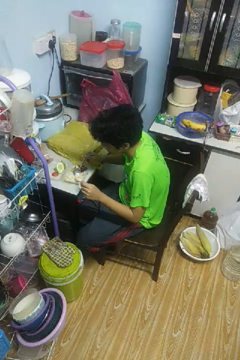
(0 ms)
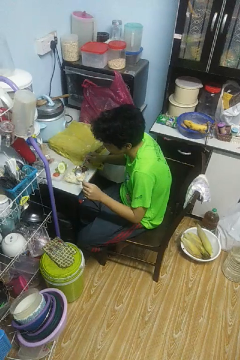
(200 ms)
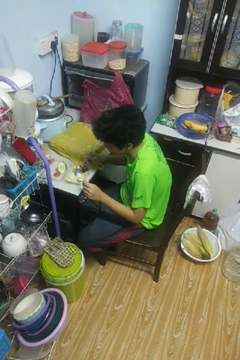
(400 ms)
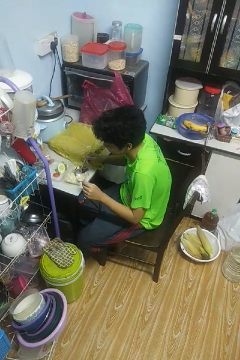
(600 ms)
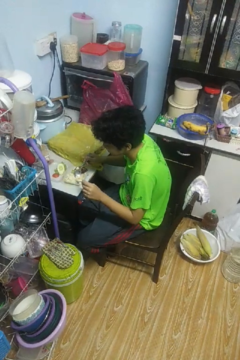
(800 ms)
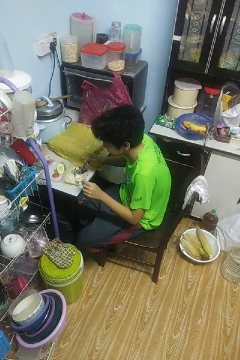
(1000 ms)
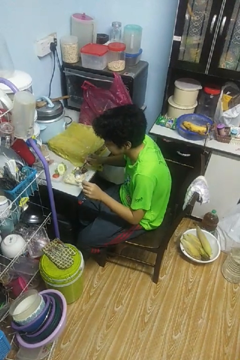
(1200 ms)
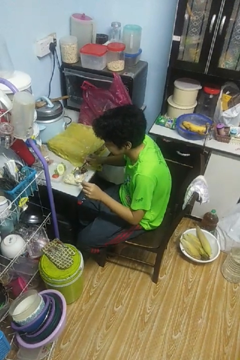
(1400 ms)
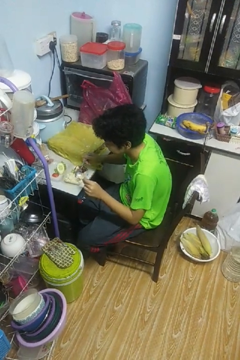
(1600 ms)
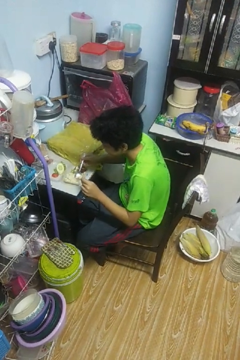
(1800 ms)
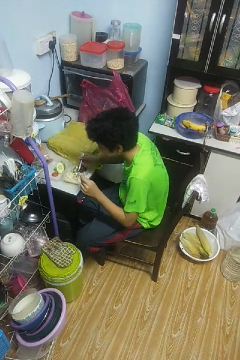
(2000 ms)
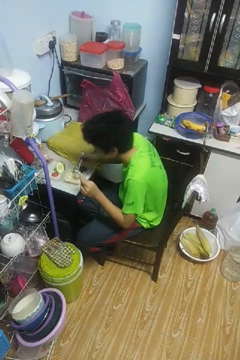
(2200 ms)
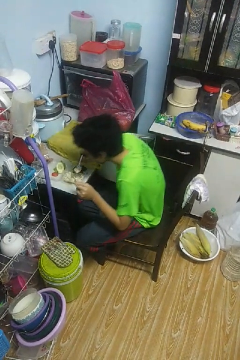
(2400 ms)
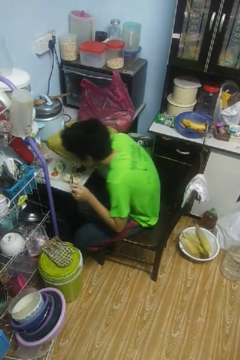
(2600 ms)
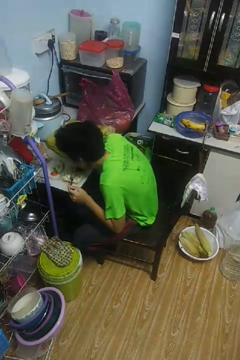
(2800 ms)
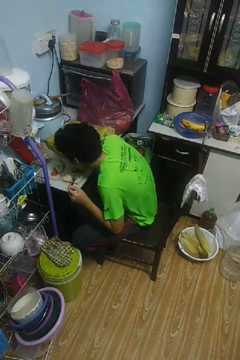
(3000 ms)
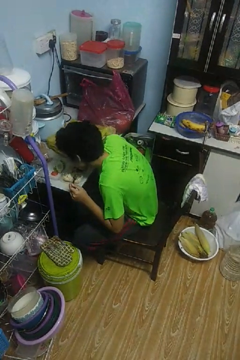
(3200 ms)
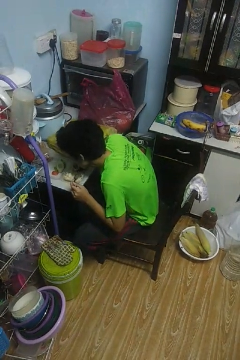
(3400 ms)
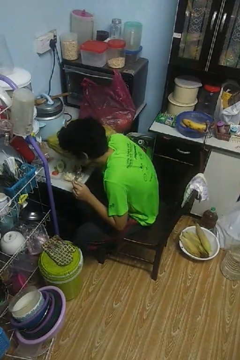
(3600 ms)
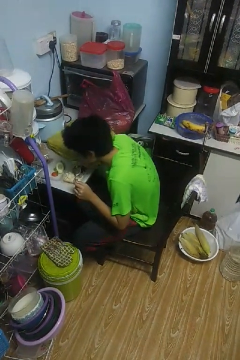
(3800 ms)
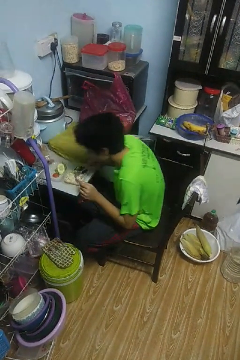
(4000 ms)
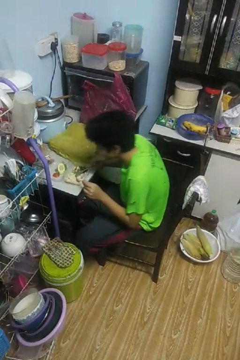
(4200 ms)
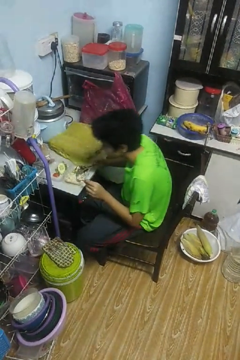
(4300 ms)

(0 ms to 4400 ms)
person eats with utensil

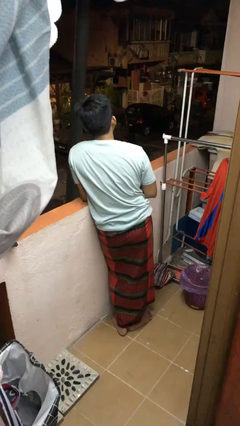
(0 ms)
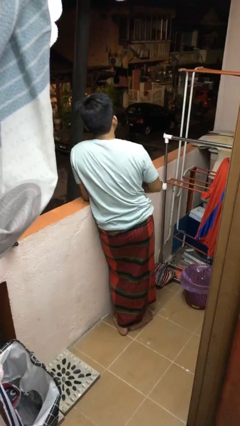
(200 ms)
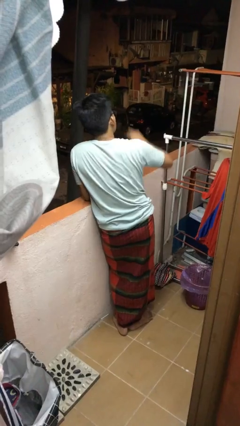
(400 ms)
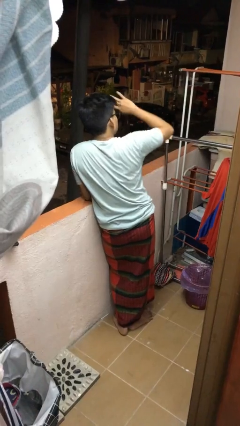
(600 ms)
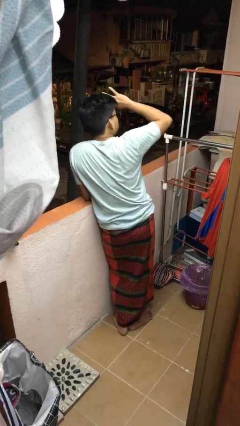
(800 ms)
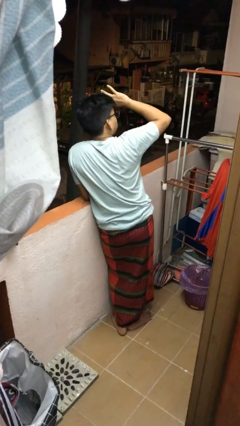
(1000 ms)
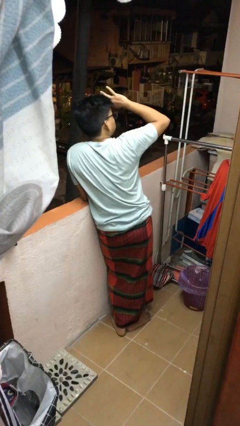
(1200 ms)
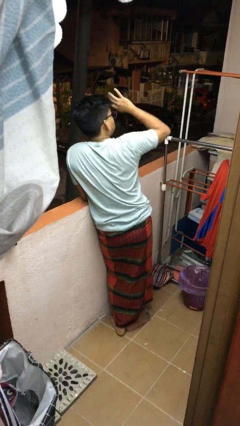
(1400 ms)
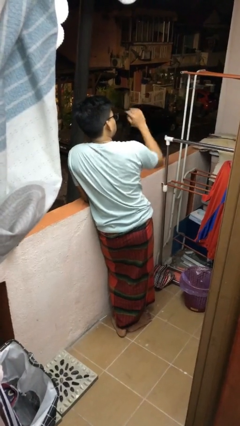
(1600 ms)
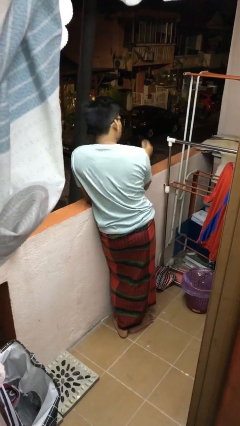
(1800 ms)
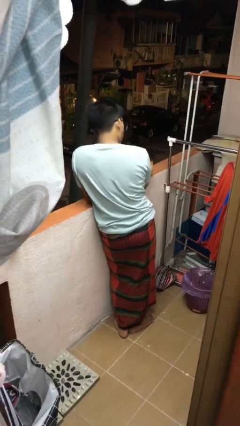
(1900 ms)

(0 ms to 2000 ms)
person shades eyes

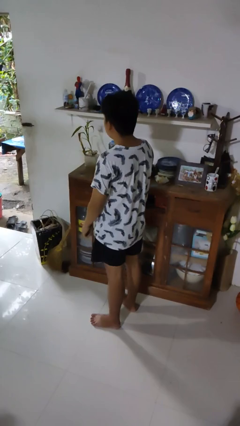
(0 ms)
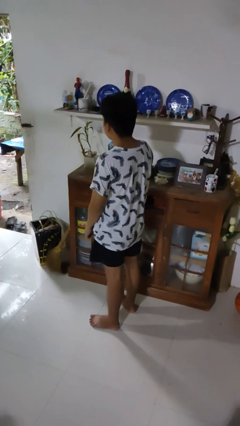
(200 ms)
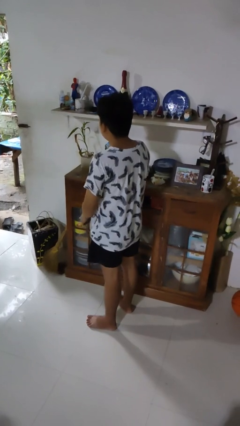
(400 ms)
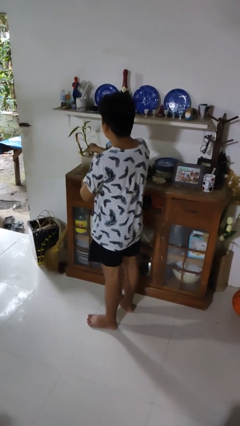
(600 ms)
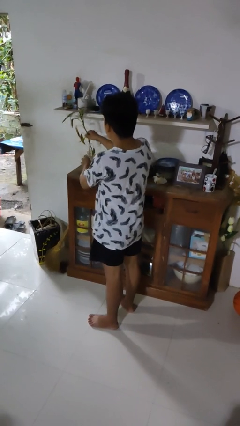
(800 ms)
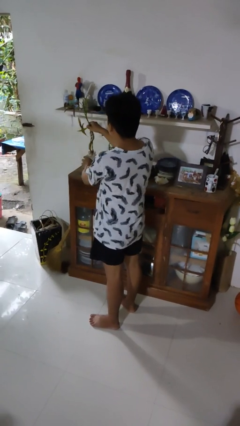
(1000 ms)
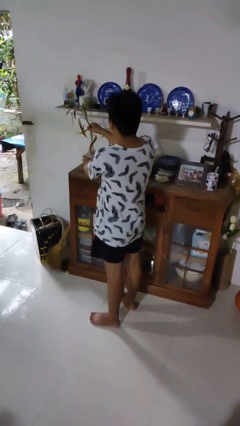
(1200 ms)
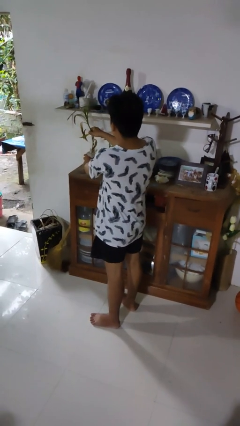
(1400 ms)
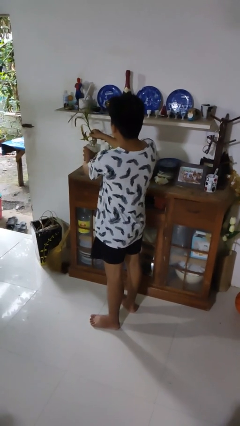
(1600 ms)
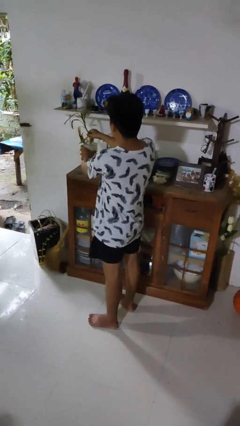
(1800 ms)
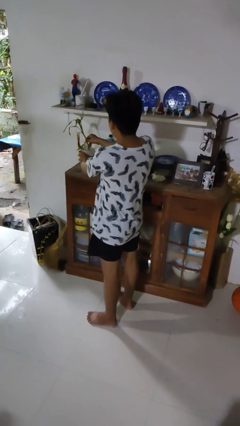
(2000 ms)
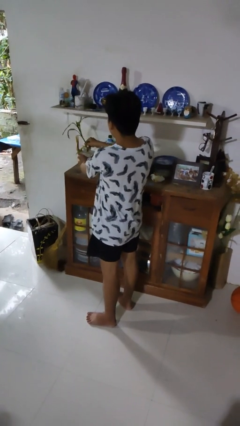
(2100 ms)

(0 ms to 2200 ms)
person arranges flowers in vase

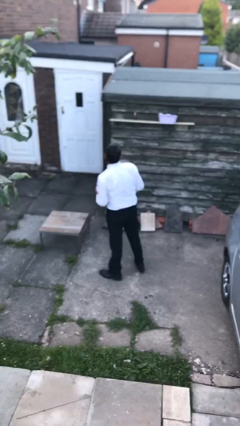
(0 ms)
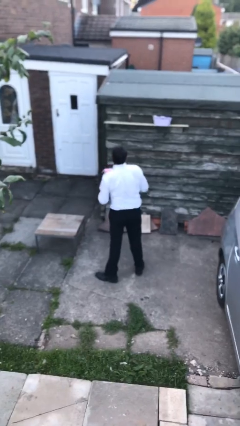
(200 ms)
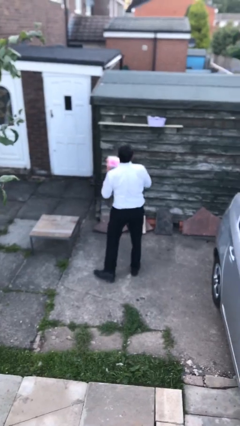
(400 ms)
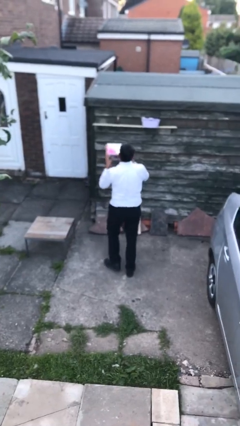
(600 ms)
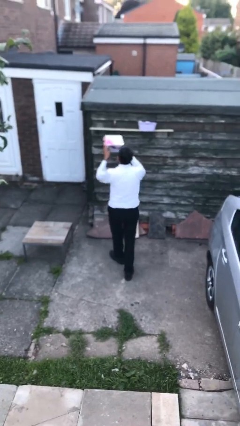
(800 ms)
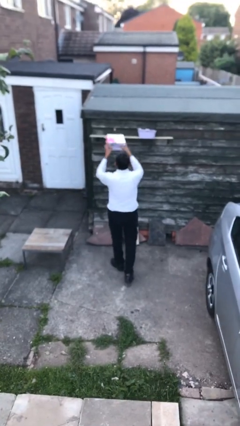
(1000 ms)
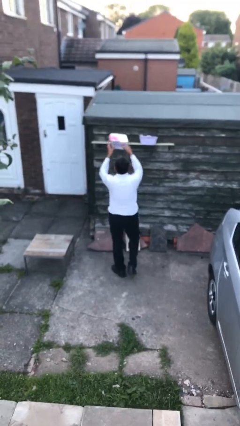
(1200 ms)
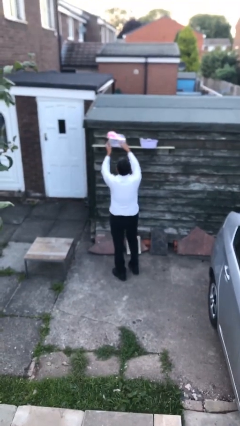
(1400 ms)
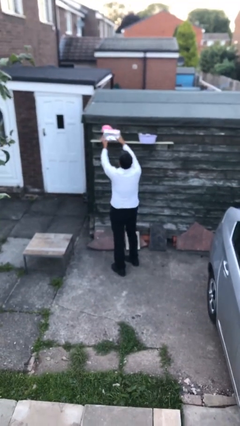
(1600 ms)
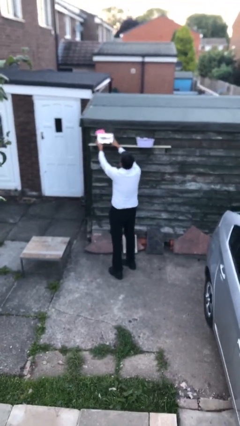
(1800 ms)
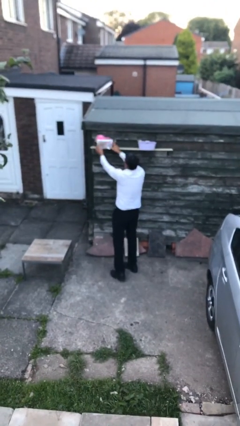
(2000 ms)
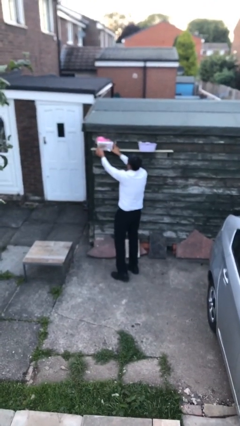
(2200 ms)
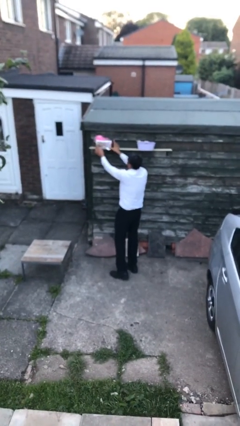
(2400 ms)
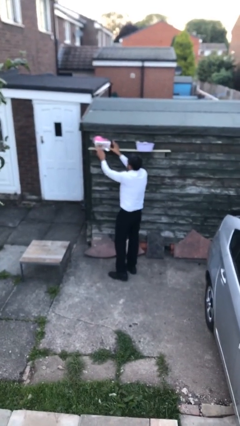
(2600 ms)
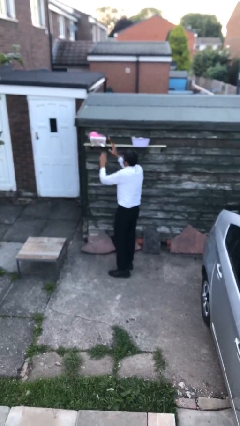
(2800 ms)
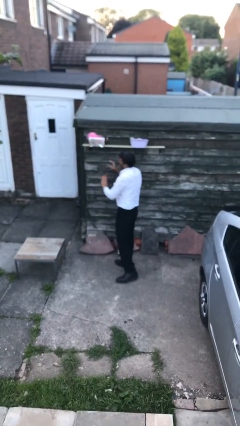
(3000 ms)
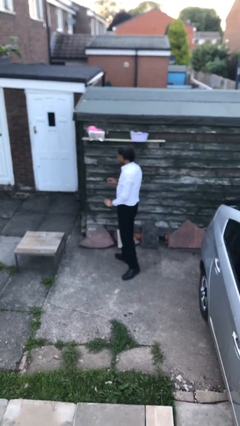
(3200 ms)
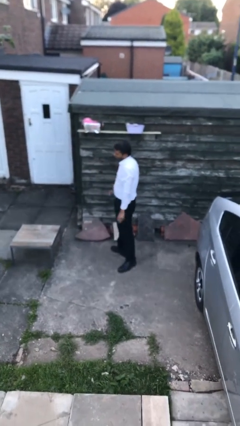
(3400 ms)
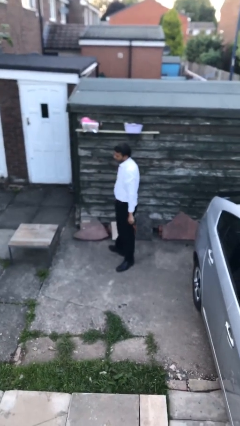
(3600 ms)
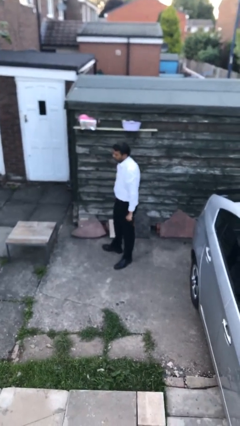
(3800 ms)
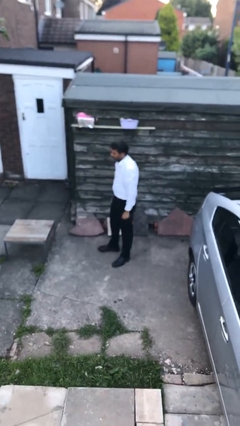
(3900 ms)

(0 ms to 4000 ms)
person puts down object on shelf

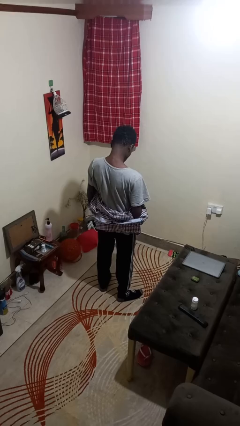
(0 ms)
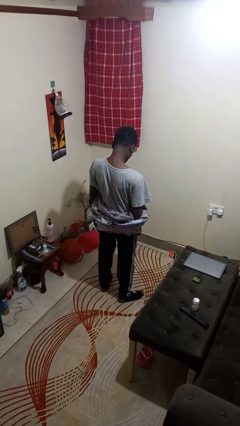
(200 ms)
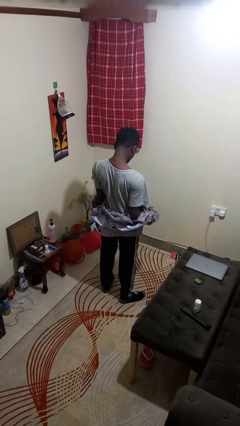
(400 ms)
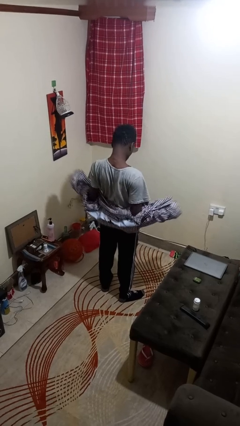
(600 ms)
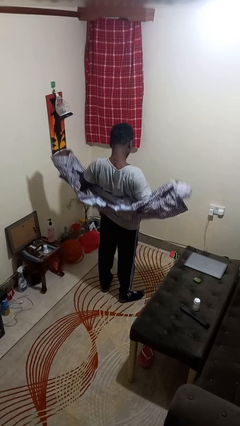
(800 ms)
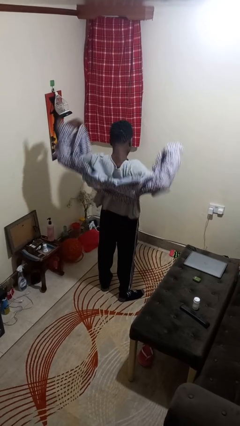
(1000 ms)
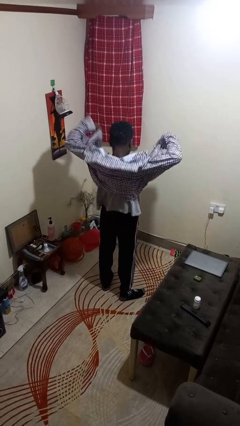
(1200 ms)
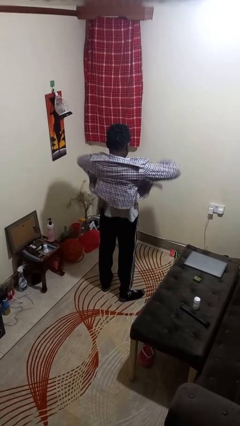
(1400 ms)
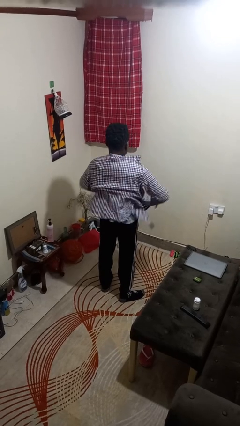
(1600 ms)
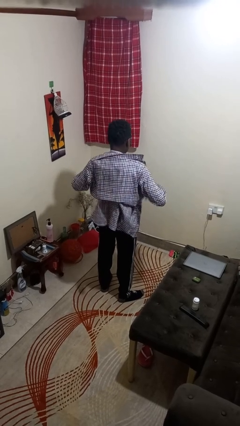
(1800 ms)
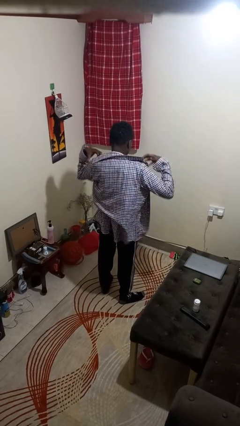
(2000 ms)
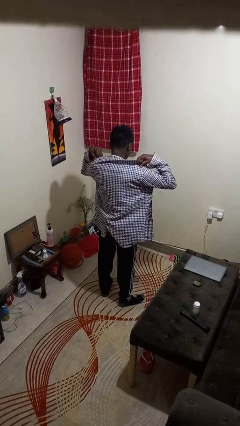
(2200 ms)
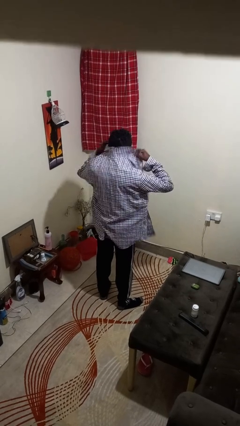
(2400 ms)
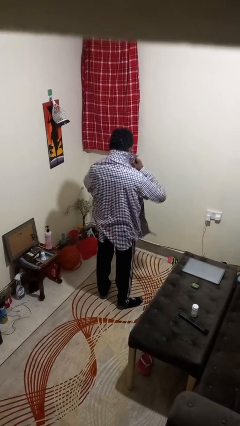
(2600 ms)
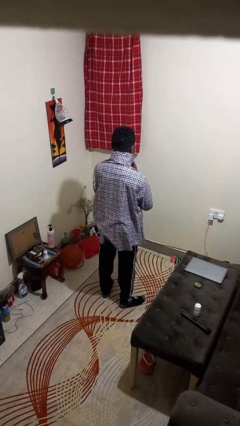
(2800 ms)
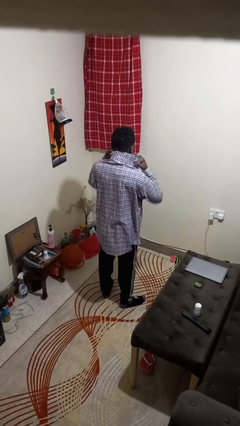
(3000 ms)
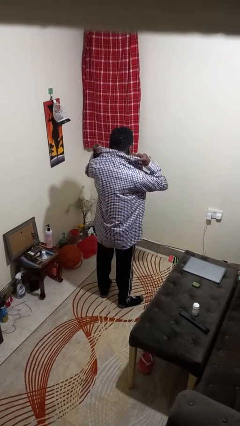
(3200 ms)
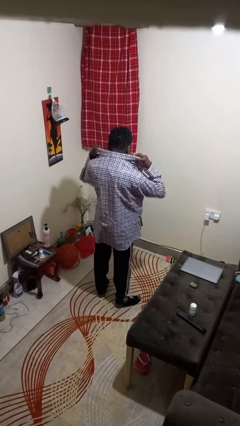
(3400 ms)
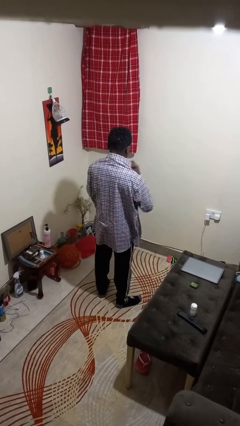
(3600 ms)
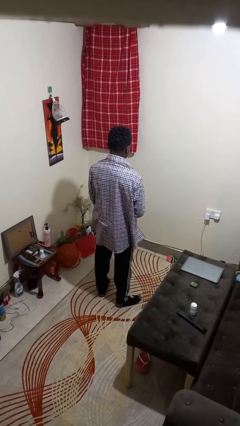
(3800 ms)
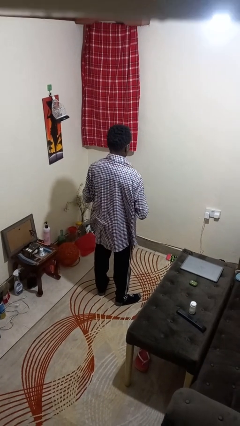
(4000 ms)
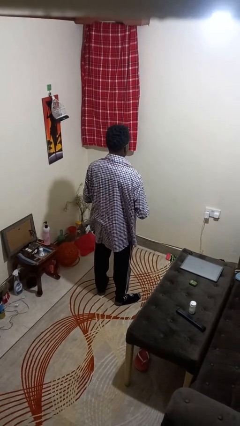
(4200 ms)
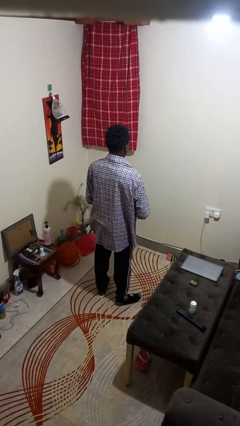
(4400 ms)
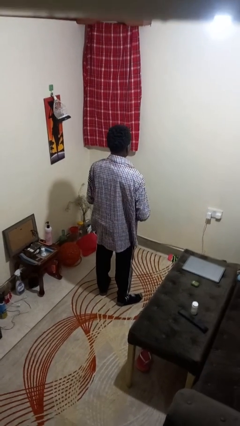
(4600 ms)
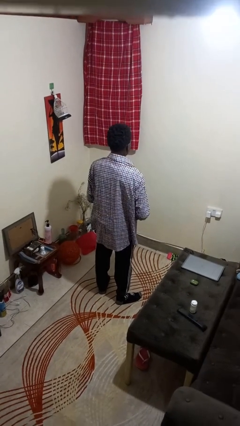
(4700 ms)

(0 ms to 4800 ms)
person puts on shirt

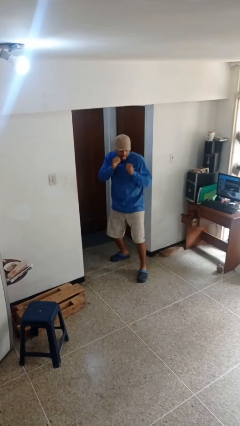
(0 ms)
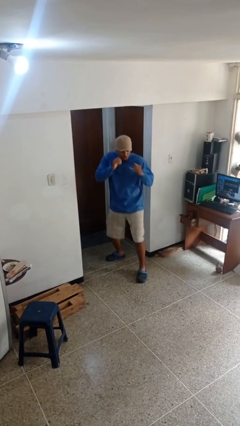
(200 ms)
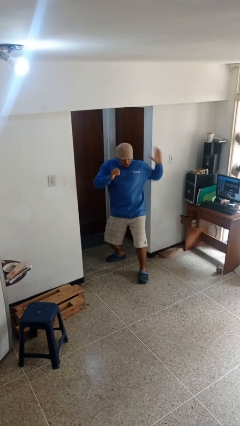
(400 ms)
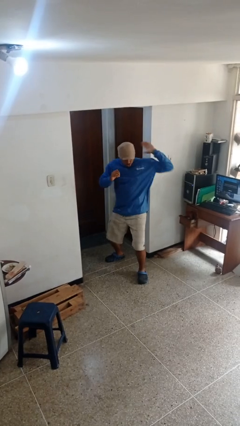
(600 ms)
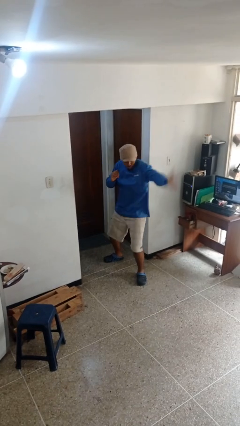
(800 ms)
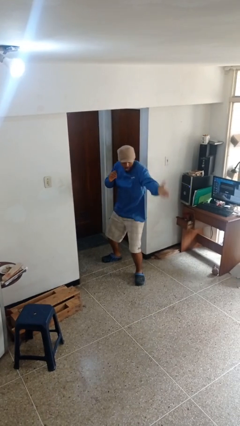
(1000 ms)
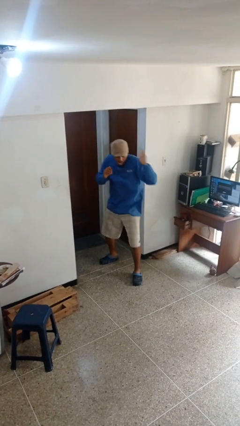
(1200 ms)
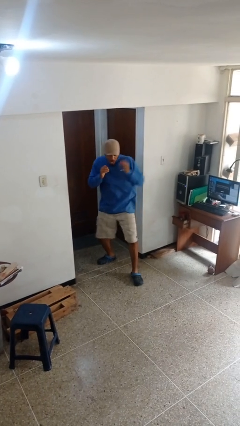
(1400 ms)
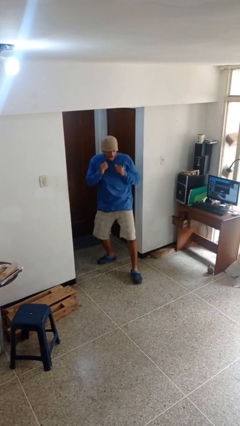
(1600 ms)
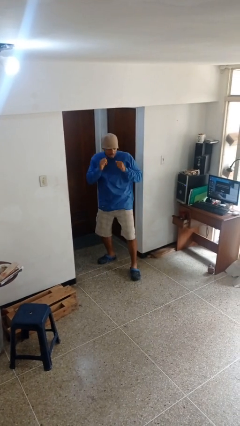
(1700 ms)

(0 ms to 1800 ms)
person karate chop
